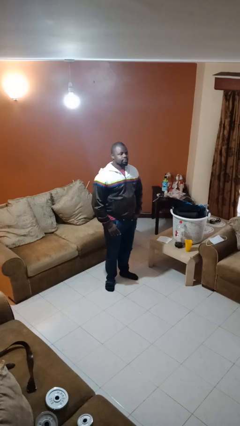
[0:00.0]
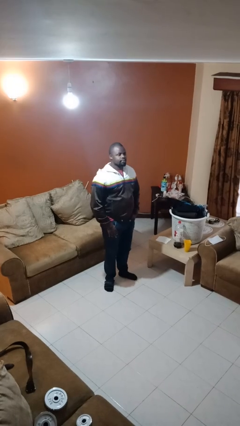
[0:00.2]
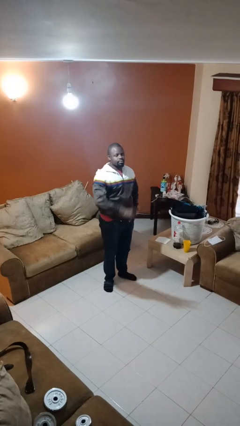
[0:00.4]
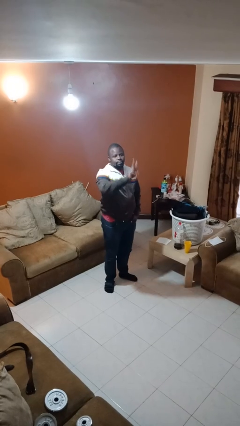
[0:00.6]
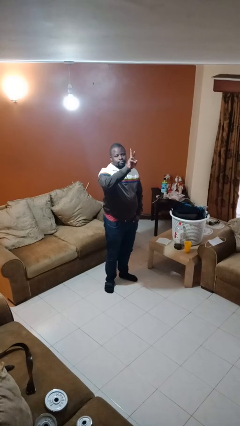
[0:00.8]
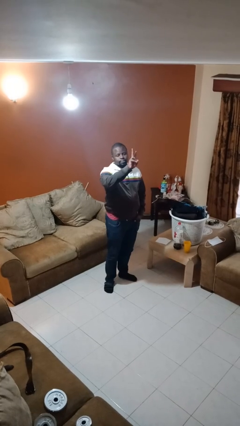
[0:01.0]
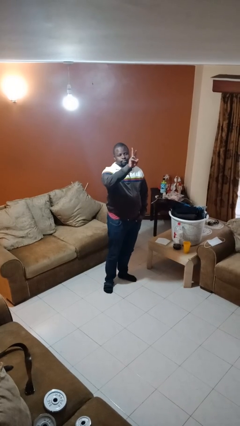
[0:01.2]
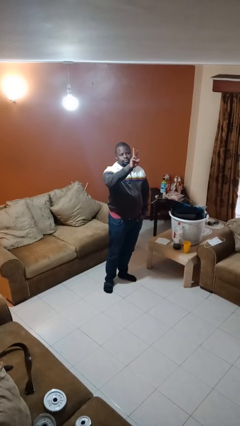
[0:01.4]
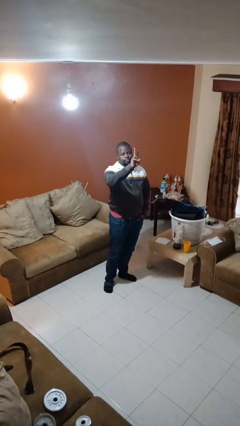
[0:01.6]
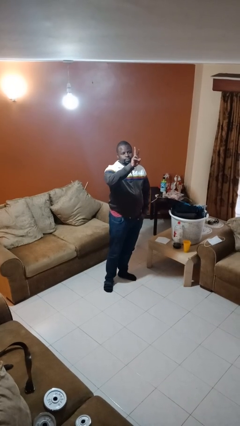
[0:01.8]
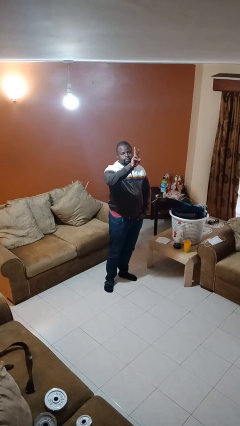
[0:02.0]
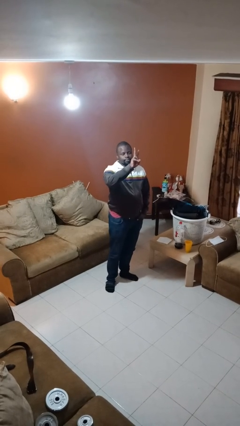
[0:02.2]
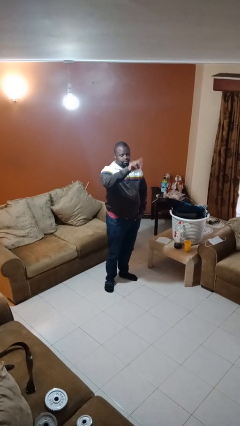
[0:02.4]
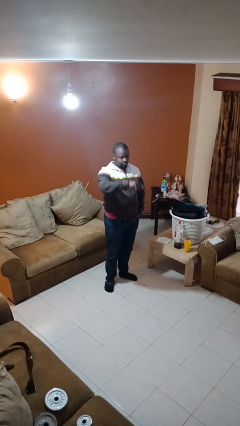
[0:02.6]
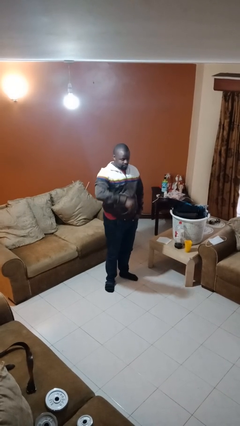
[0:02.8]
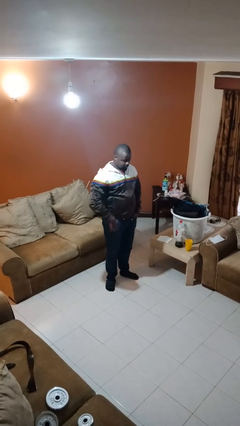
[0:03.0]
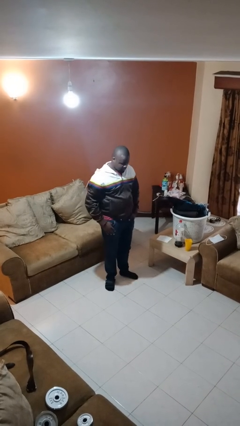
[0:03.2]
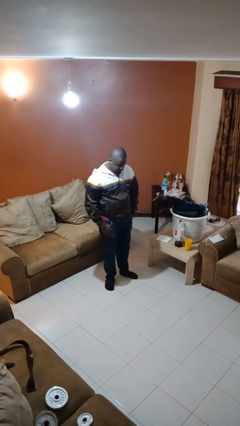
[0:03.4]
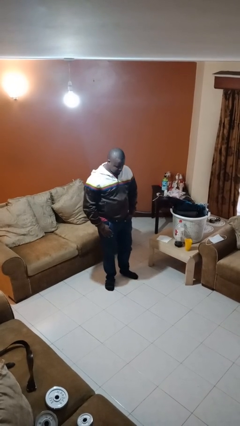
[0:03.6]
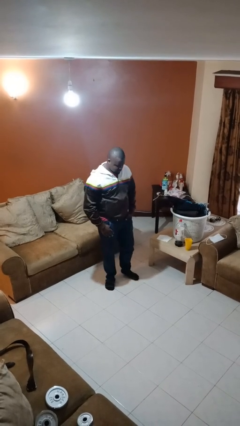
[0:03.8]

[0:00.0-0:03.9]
person gestures peace

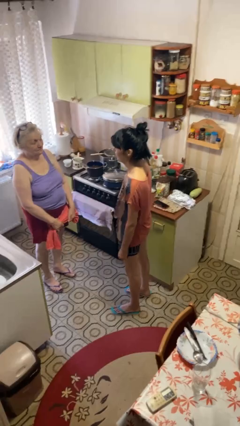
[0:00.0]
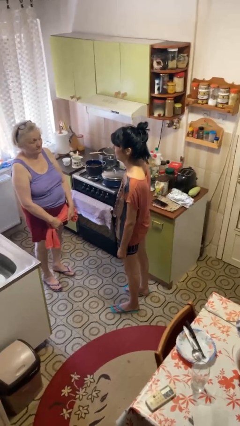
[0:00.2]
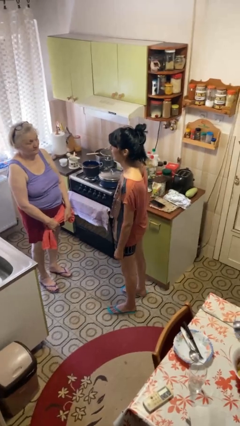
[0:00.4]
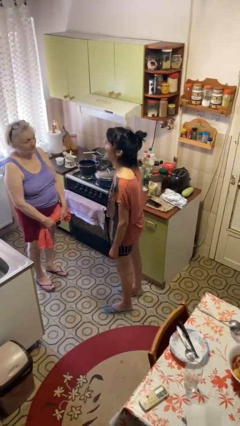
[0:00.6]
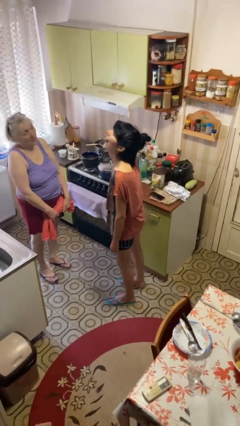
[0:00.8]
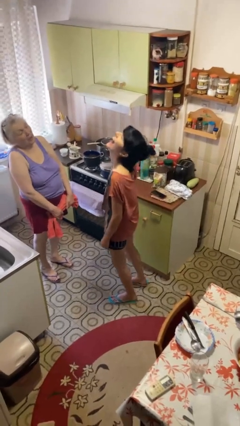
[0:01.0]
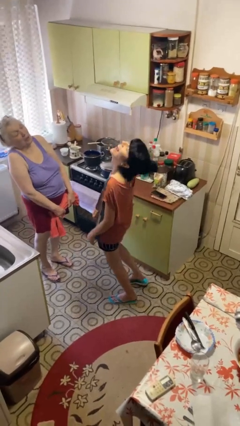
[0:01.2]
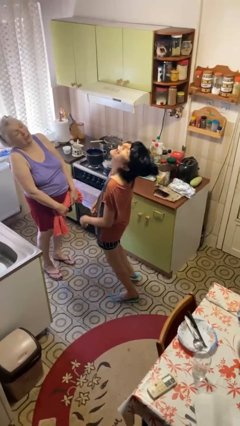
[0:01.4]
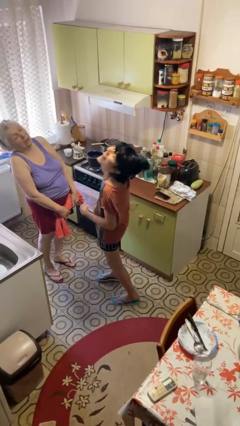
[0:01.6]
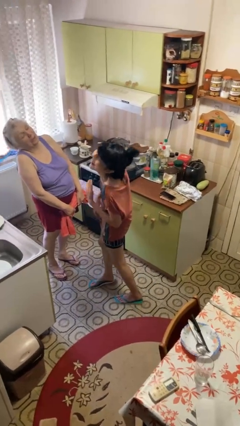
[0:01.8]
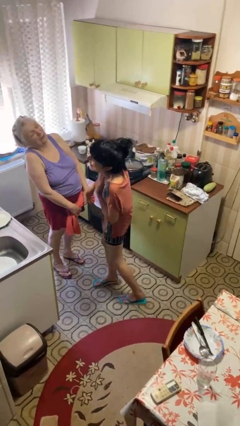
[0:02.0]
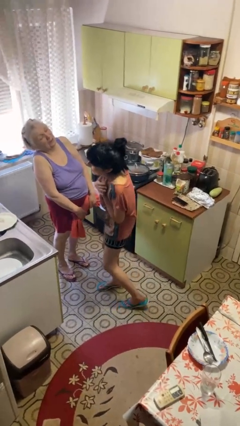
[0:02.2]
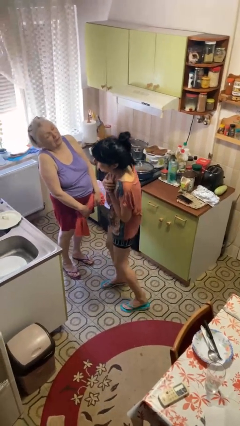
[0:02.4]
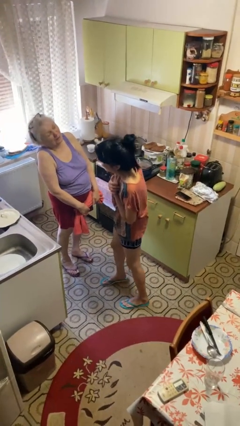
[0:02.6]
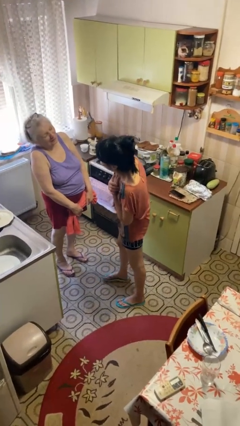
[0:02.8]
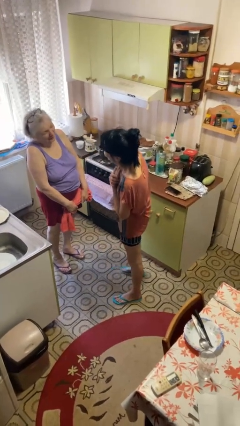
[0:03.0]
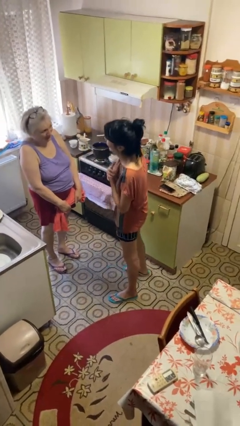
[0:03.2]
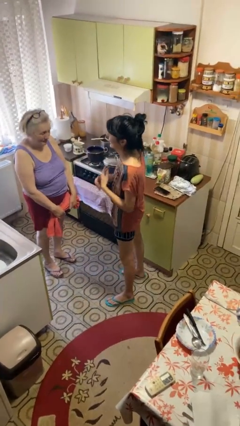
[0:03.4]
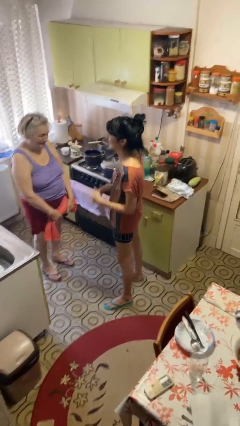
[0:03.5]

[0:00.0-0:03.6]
person laughs with person

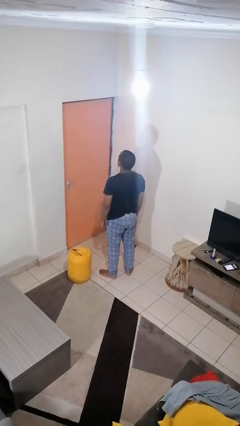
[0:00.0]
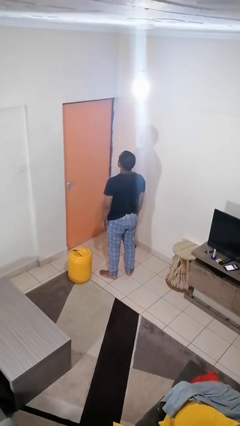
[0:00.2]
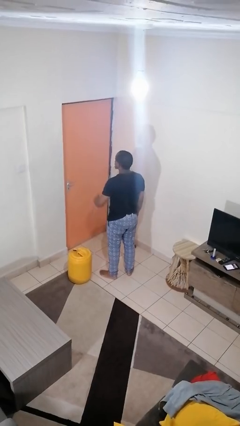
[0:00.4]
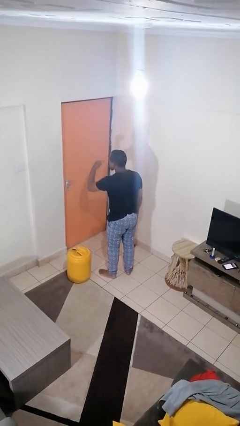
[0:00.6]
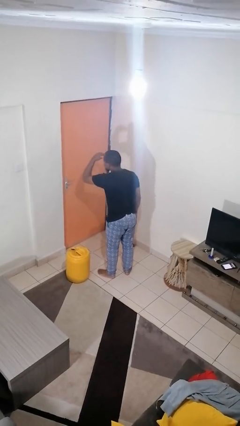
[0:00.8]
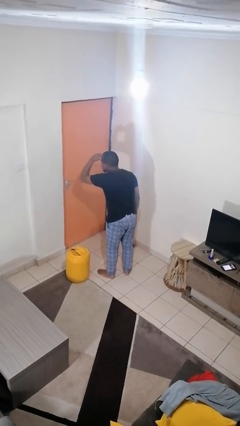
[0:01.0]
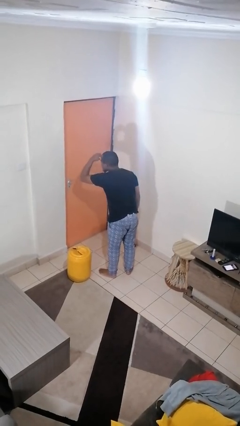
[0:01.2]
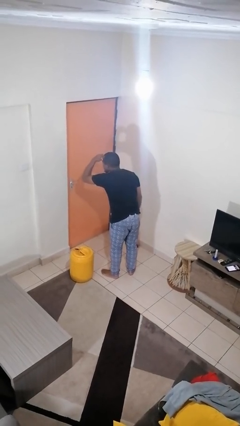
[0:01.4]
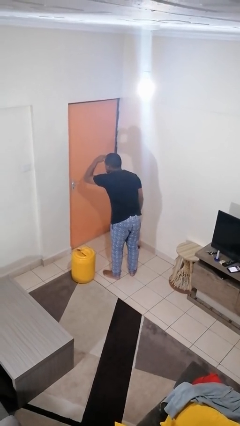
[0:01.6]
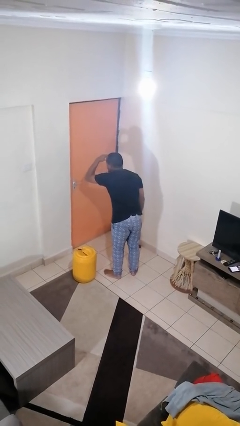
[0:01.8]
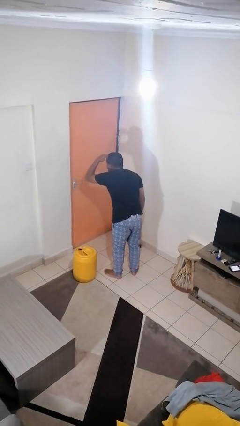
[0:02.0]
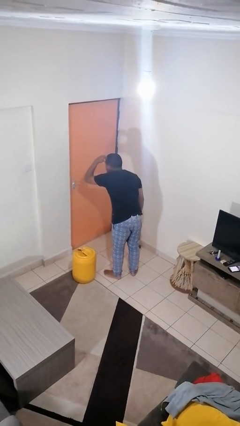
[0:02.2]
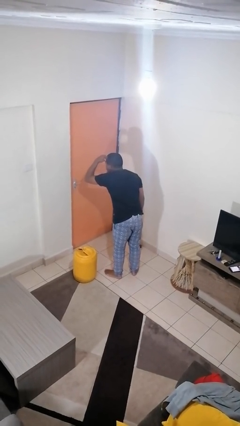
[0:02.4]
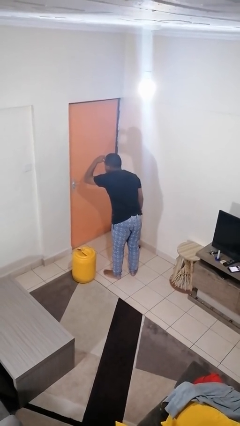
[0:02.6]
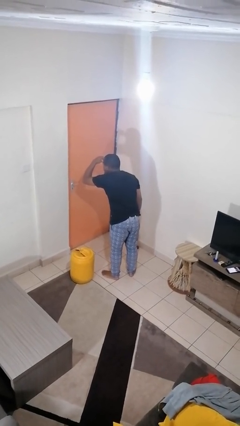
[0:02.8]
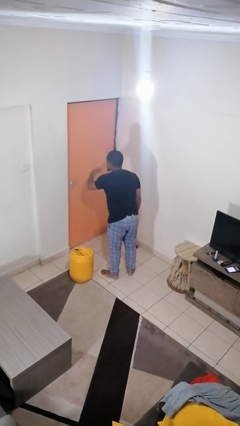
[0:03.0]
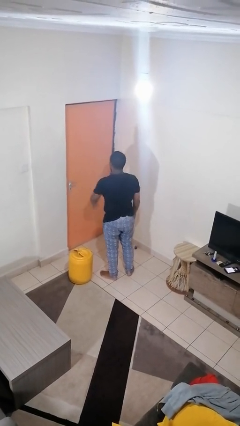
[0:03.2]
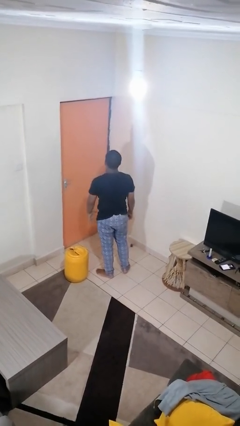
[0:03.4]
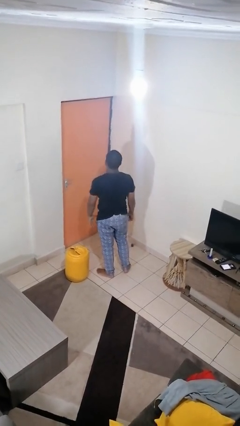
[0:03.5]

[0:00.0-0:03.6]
person shades eyes

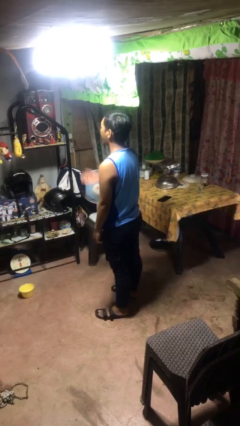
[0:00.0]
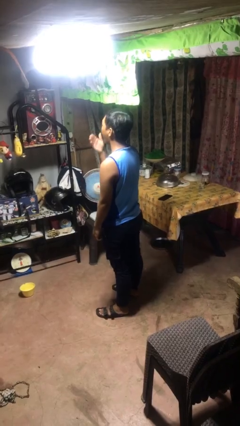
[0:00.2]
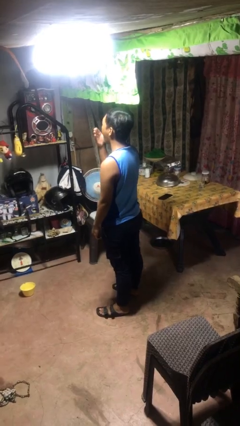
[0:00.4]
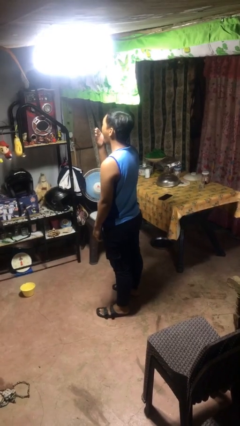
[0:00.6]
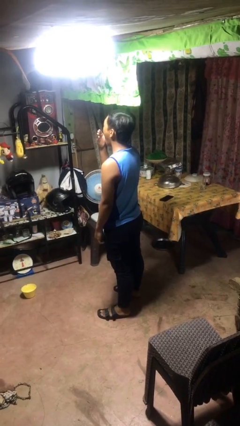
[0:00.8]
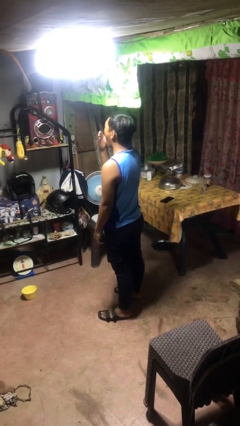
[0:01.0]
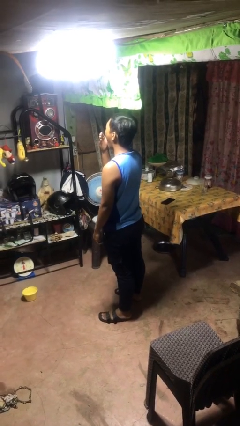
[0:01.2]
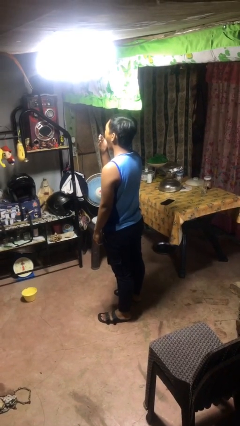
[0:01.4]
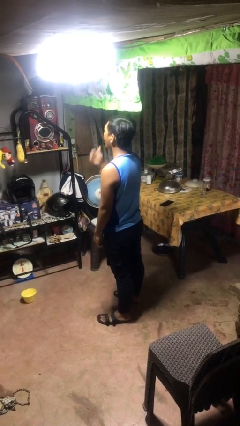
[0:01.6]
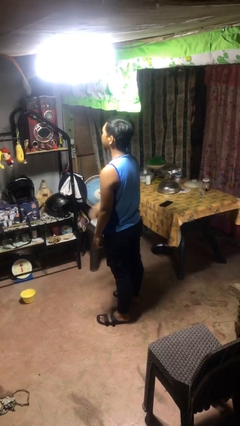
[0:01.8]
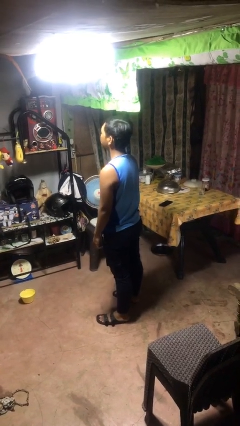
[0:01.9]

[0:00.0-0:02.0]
person yawns

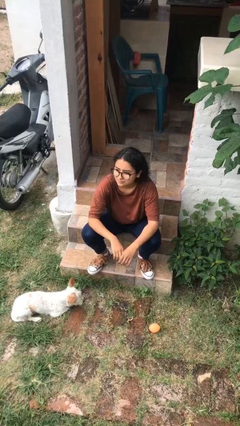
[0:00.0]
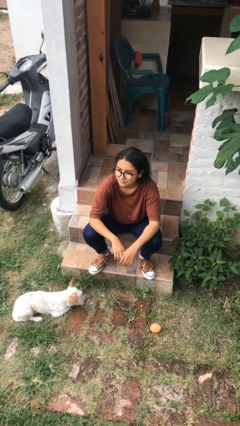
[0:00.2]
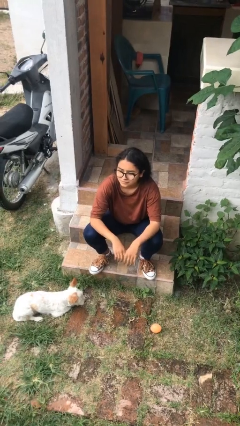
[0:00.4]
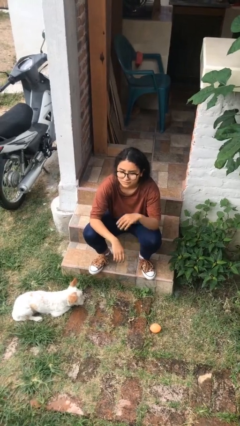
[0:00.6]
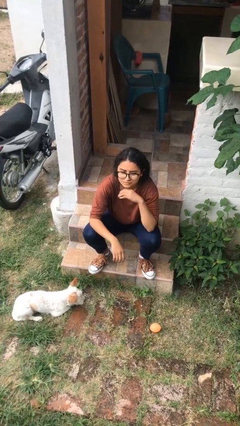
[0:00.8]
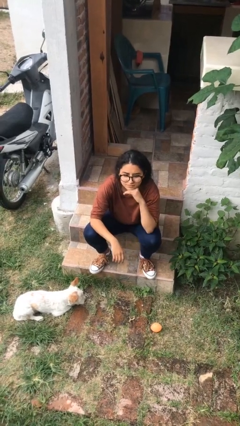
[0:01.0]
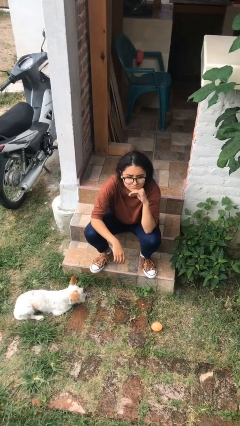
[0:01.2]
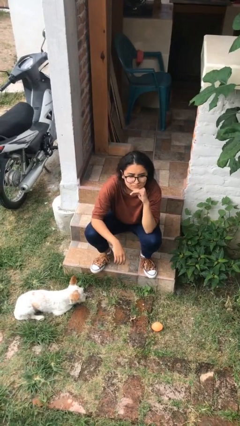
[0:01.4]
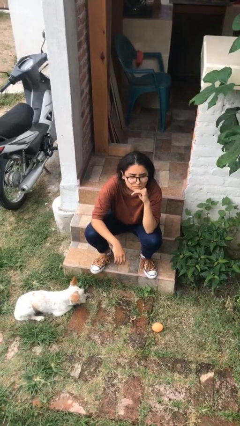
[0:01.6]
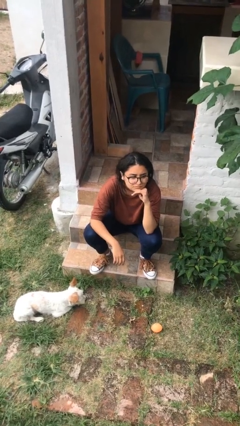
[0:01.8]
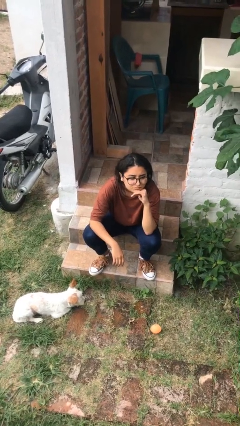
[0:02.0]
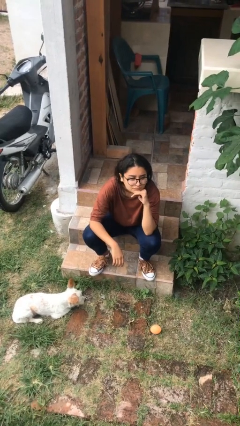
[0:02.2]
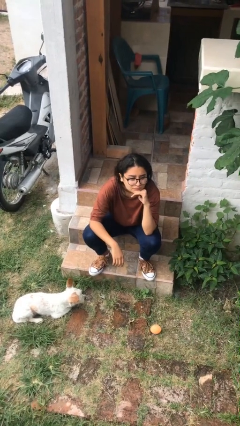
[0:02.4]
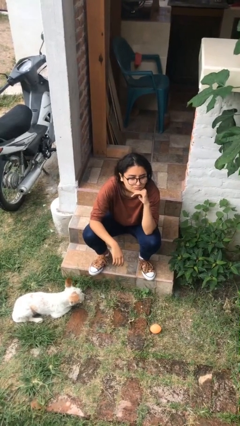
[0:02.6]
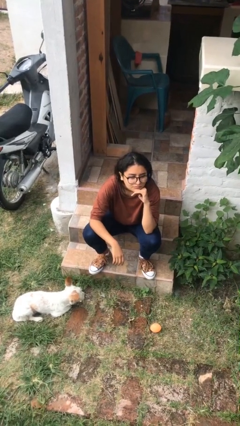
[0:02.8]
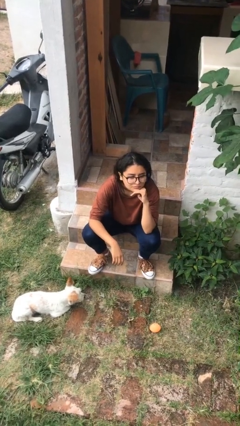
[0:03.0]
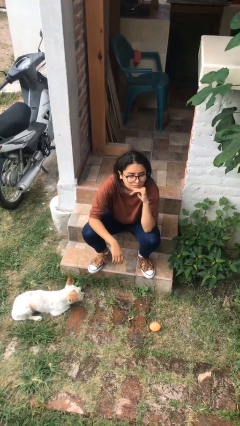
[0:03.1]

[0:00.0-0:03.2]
person strokes chin

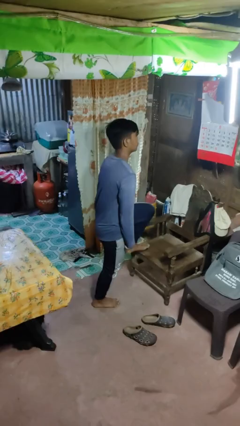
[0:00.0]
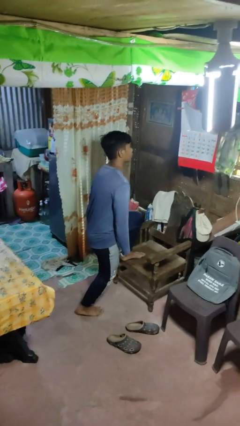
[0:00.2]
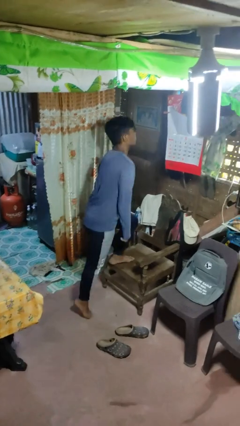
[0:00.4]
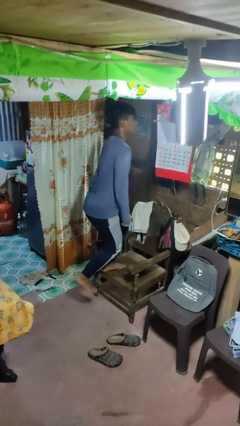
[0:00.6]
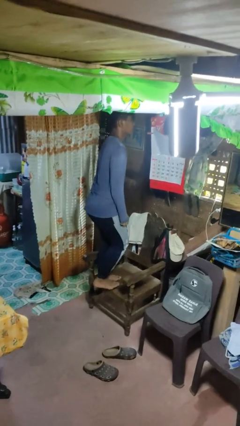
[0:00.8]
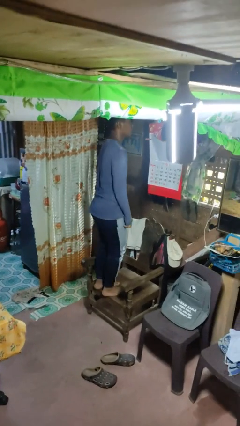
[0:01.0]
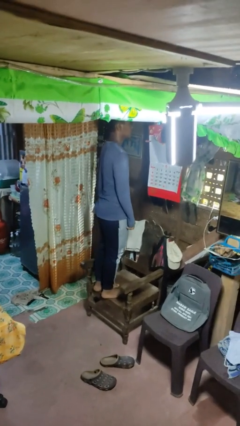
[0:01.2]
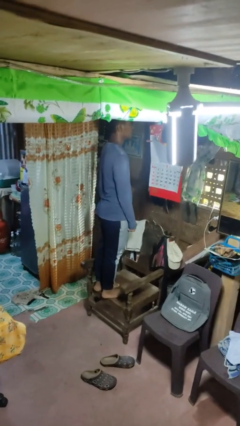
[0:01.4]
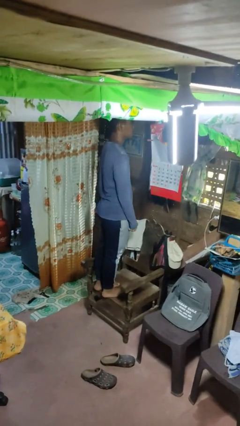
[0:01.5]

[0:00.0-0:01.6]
person climbs on chair

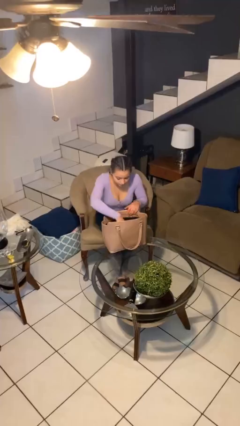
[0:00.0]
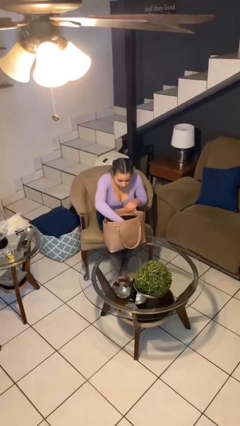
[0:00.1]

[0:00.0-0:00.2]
person takes object from purse
